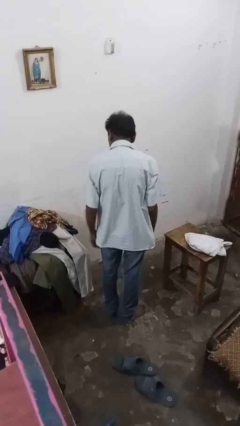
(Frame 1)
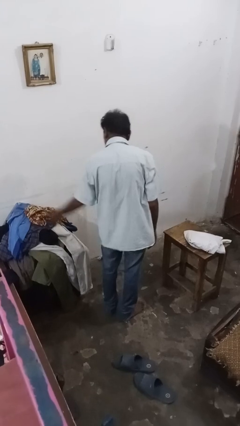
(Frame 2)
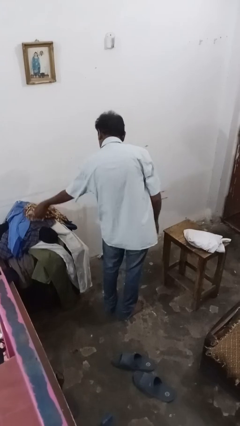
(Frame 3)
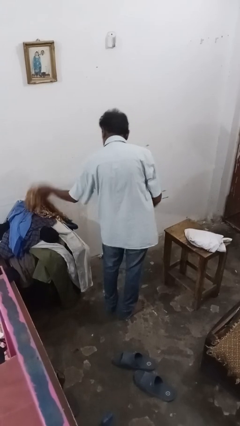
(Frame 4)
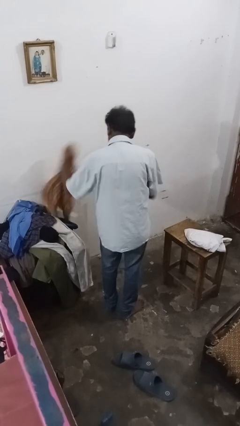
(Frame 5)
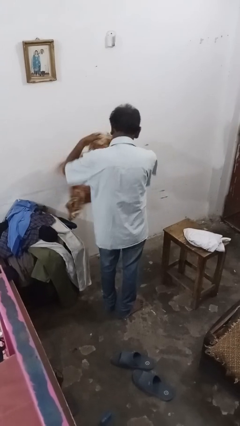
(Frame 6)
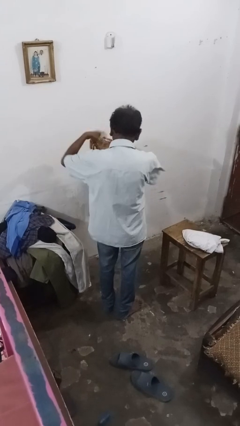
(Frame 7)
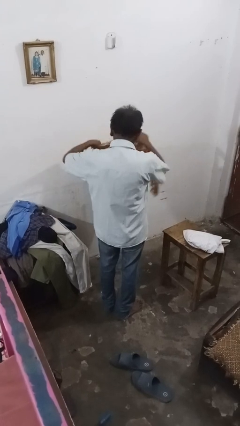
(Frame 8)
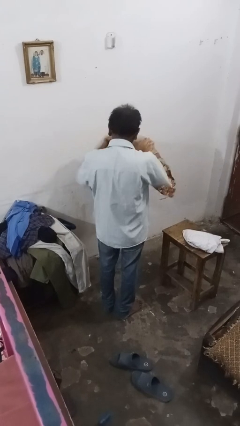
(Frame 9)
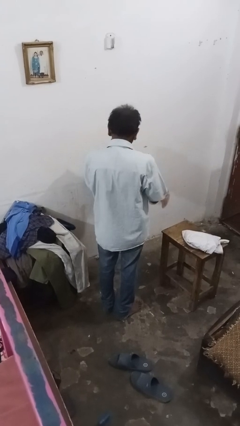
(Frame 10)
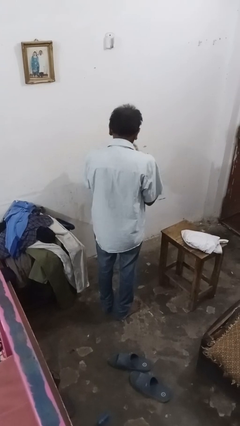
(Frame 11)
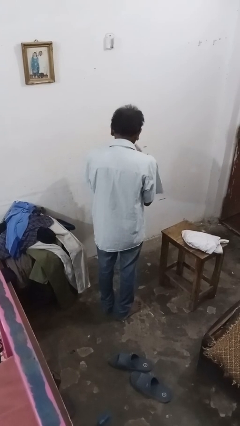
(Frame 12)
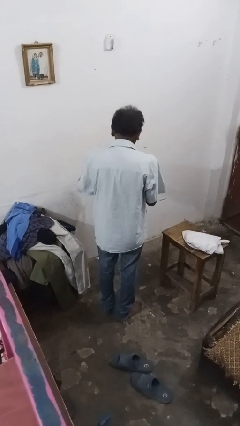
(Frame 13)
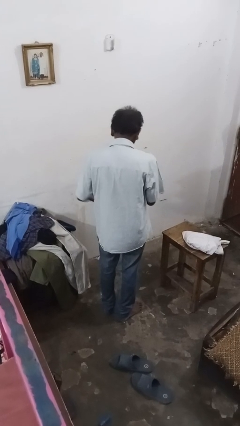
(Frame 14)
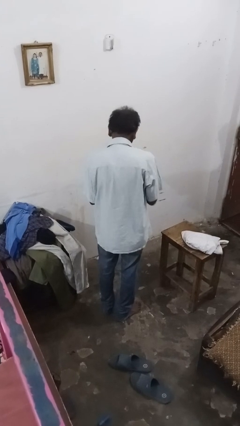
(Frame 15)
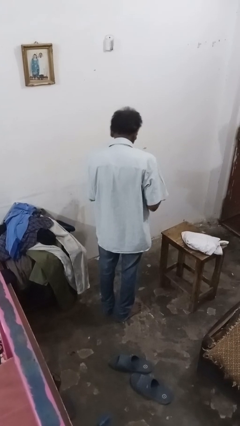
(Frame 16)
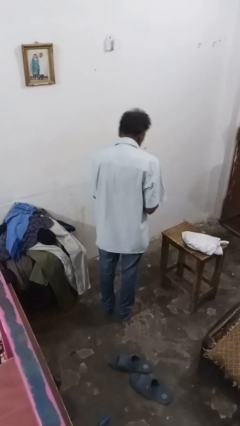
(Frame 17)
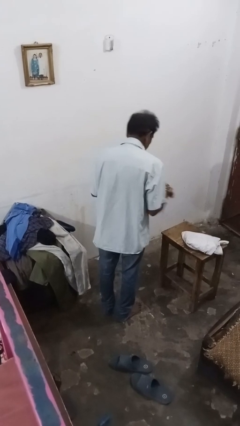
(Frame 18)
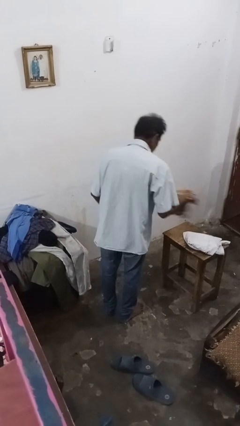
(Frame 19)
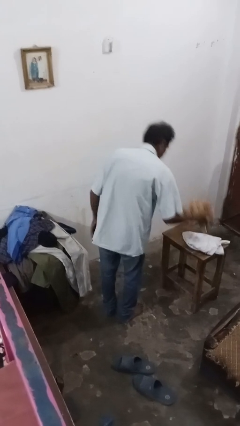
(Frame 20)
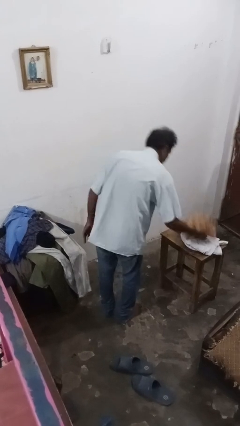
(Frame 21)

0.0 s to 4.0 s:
person folds shirt

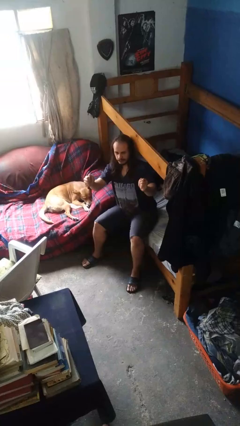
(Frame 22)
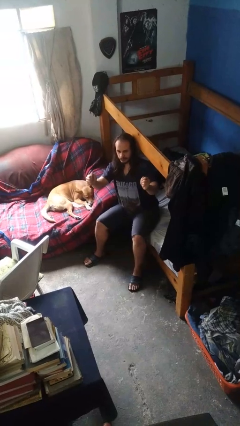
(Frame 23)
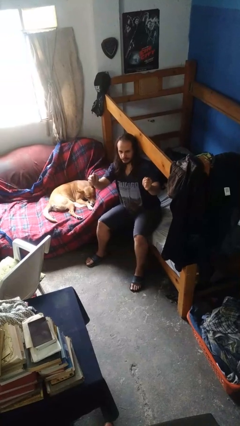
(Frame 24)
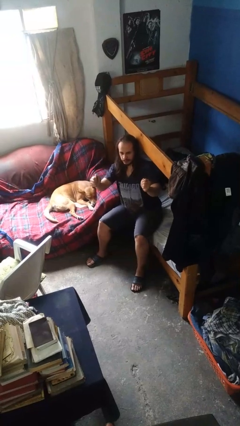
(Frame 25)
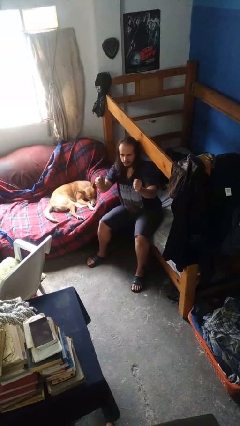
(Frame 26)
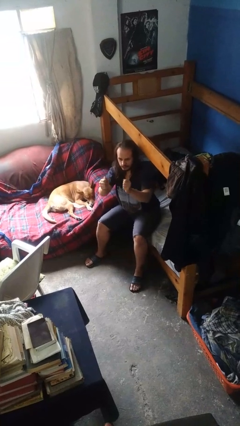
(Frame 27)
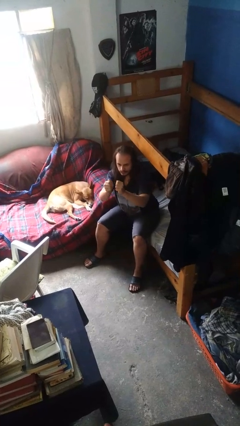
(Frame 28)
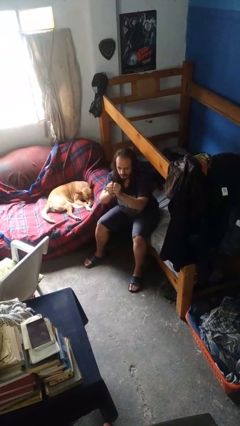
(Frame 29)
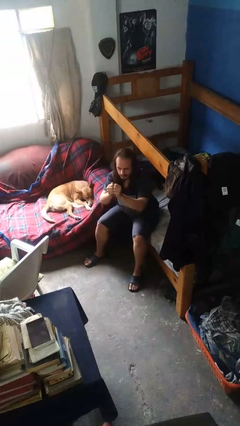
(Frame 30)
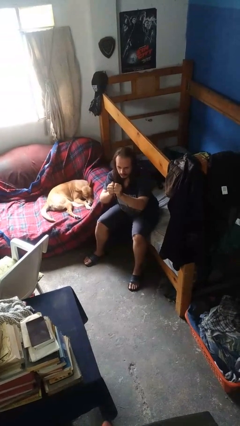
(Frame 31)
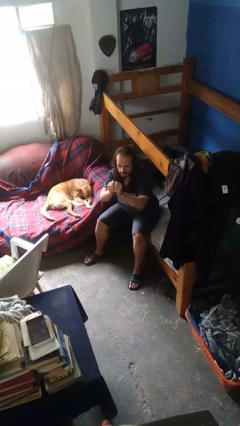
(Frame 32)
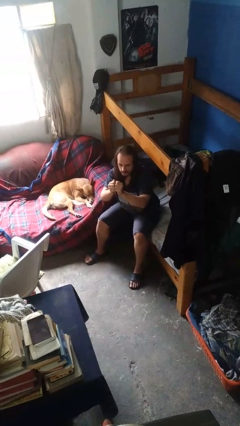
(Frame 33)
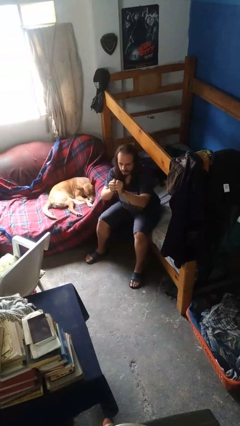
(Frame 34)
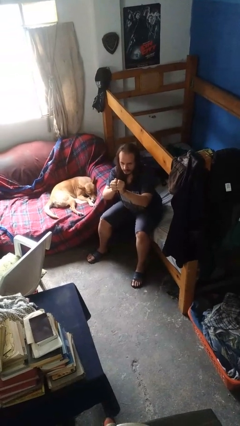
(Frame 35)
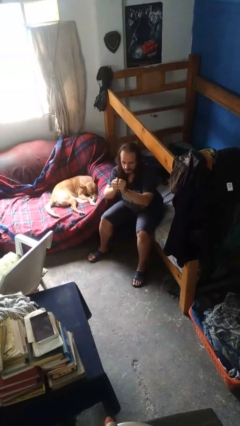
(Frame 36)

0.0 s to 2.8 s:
person gestures zoom out

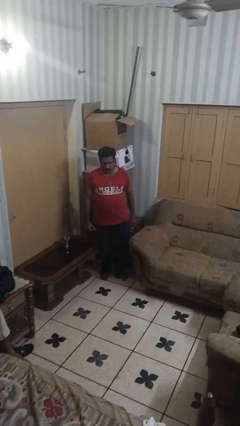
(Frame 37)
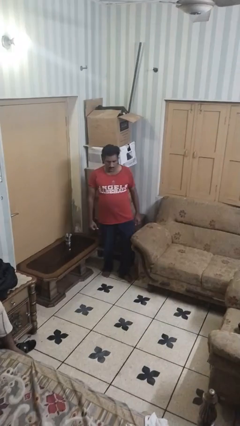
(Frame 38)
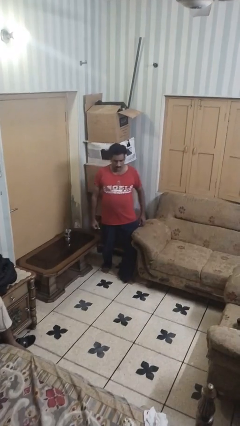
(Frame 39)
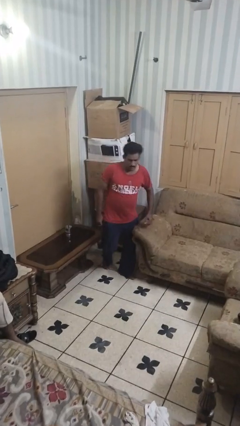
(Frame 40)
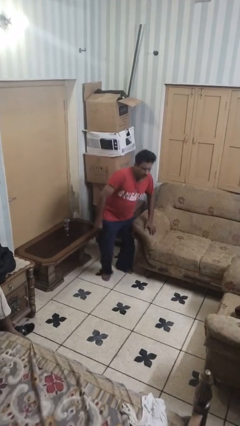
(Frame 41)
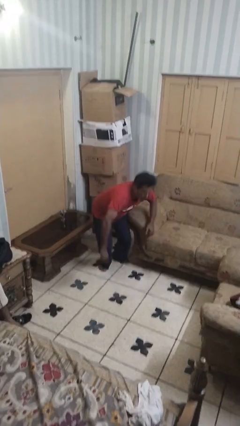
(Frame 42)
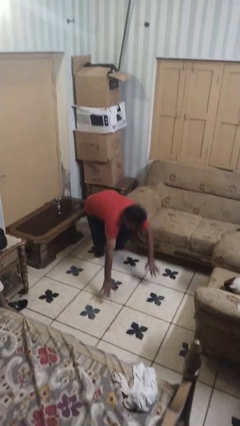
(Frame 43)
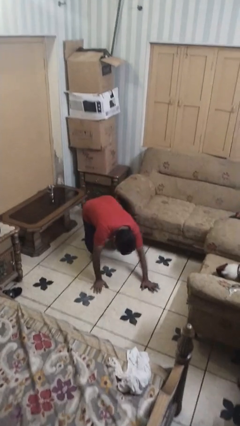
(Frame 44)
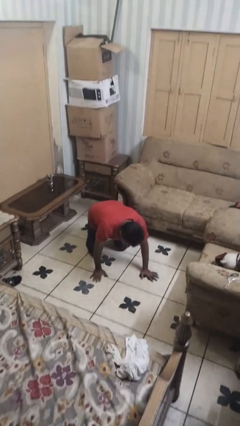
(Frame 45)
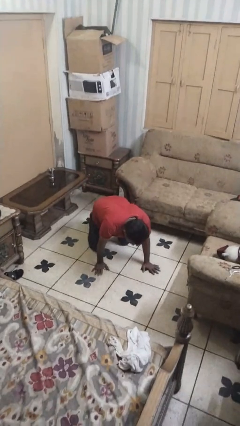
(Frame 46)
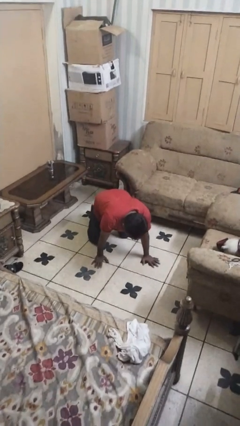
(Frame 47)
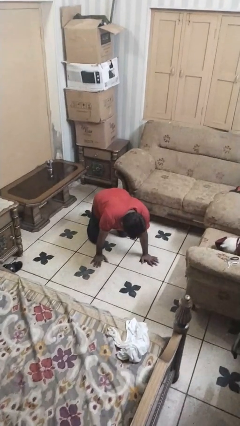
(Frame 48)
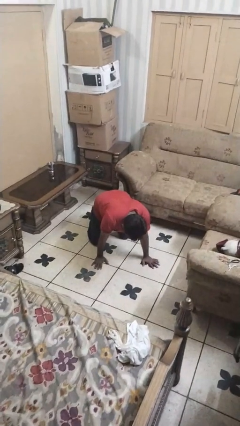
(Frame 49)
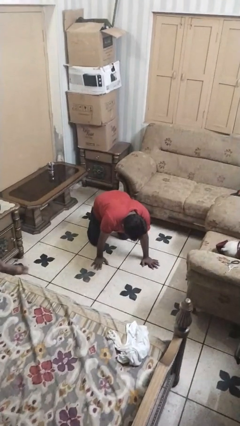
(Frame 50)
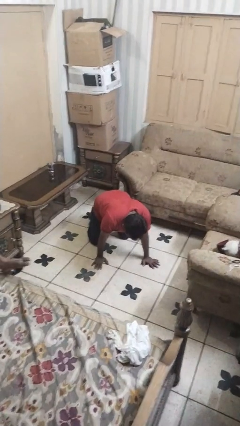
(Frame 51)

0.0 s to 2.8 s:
person trips on object on floor

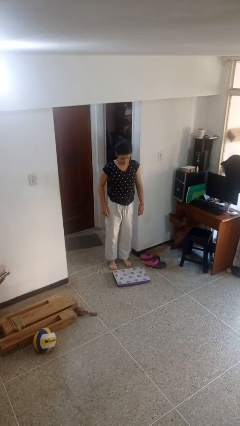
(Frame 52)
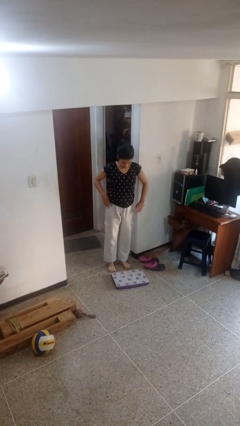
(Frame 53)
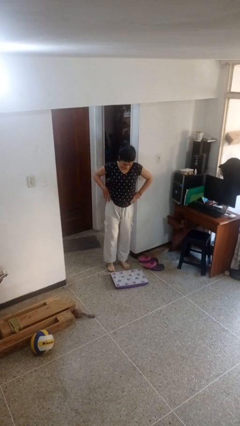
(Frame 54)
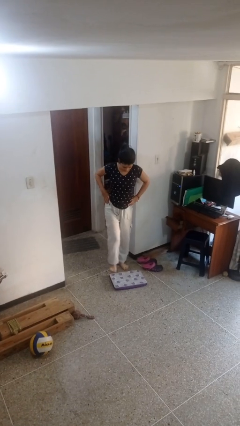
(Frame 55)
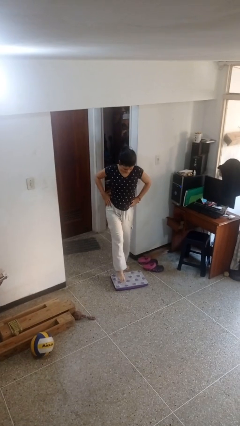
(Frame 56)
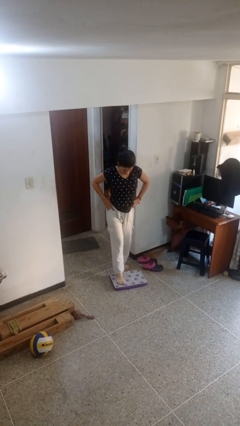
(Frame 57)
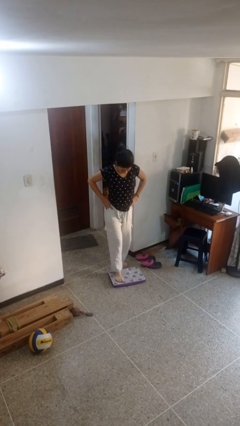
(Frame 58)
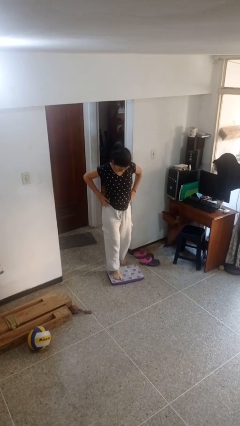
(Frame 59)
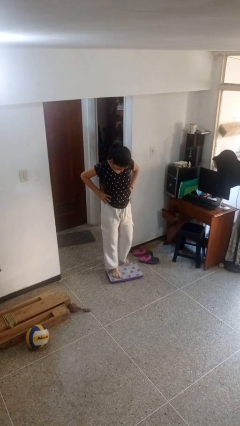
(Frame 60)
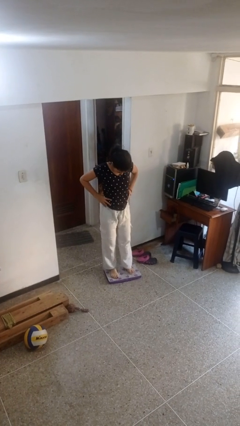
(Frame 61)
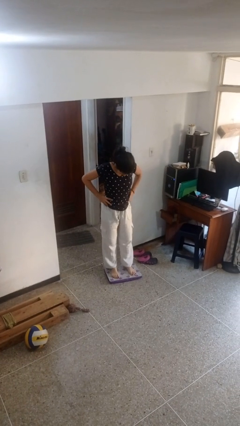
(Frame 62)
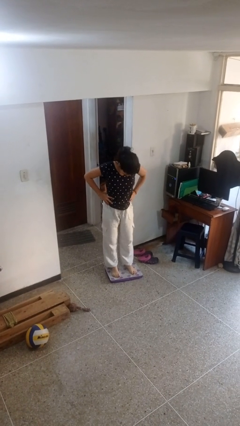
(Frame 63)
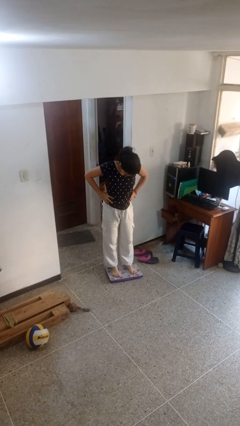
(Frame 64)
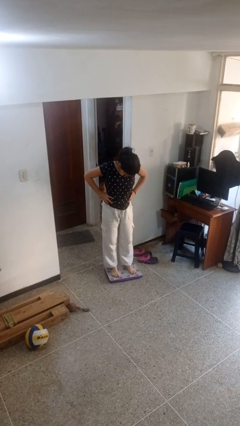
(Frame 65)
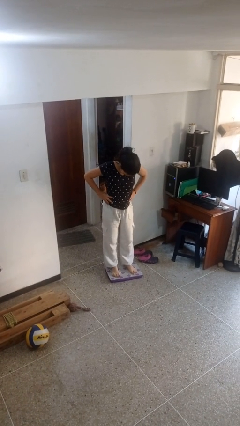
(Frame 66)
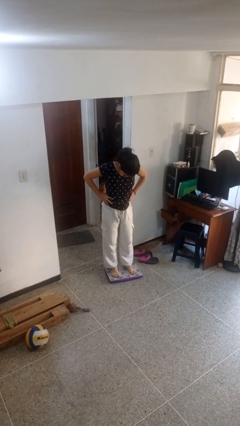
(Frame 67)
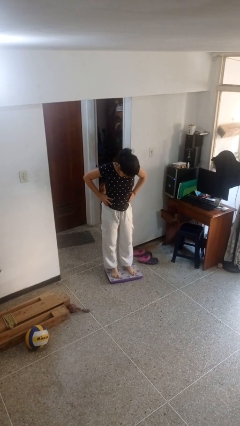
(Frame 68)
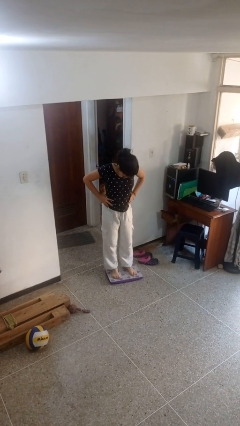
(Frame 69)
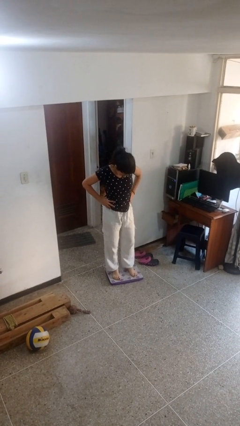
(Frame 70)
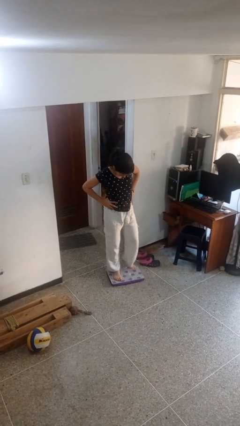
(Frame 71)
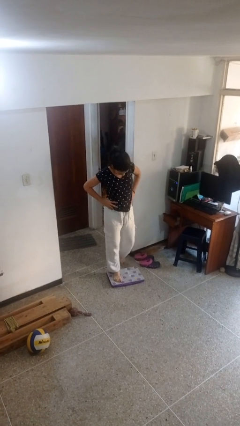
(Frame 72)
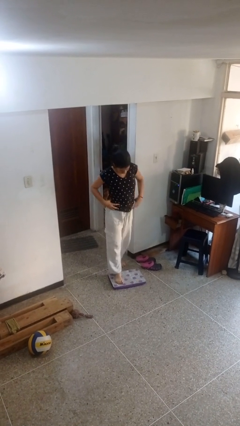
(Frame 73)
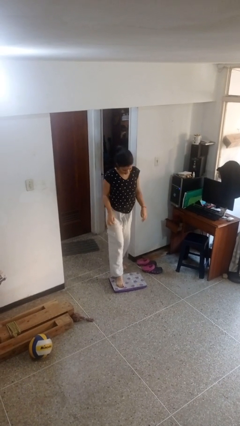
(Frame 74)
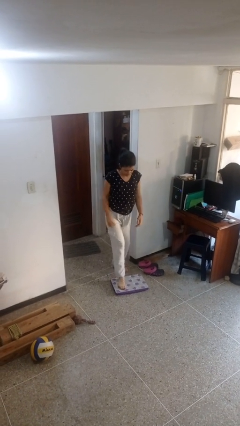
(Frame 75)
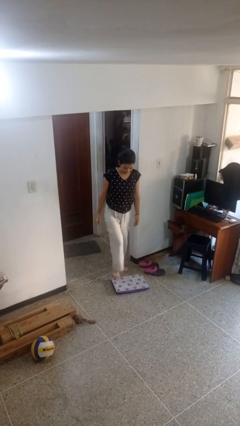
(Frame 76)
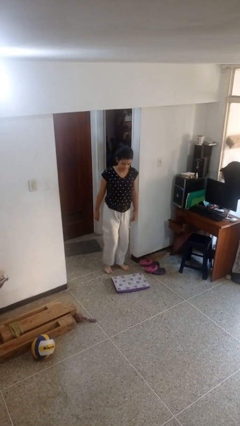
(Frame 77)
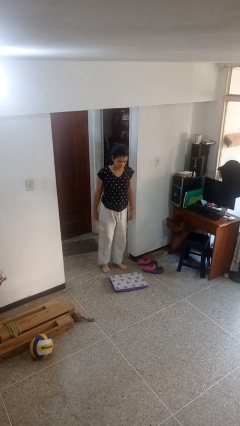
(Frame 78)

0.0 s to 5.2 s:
person uses bodyweight scale

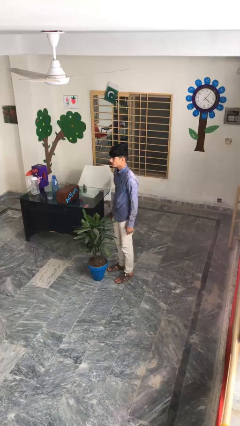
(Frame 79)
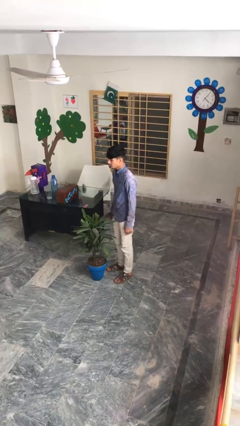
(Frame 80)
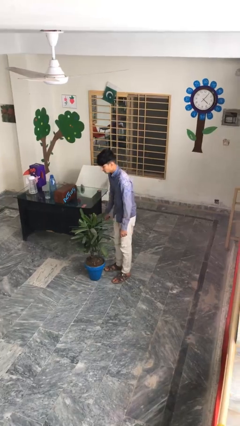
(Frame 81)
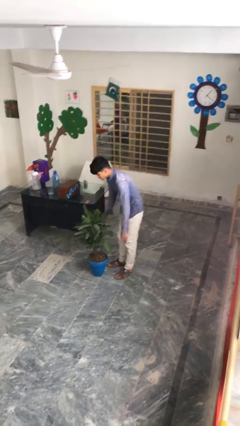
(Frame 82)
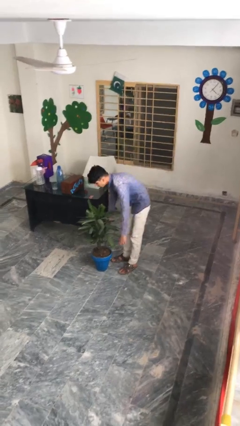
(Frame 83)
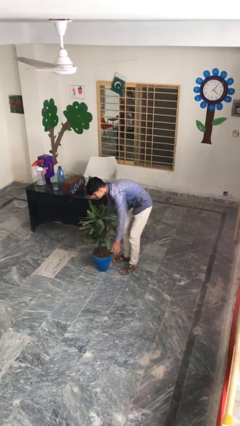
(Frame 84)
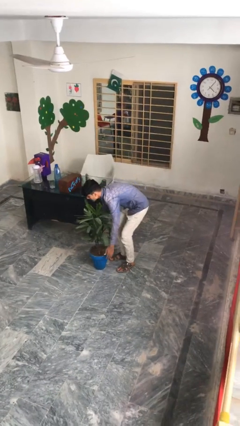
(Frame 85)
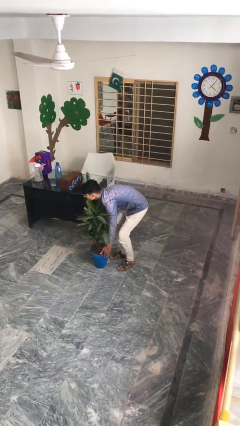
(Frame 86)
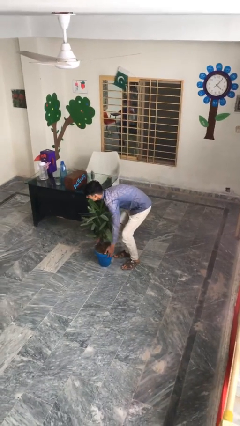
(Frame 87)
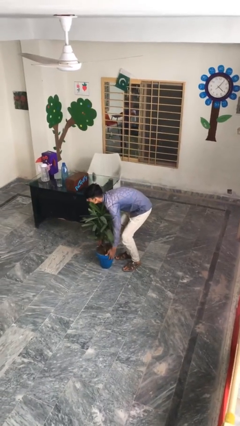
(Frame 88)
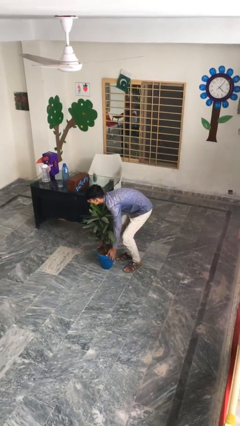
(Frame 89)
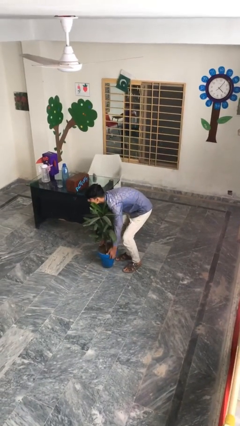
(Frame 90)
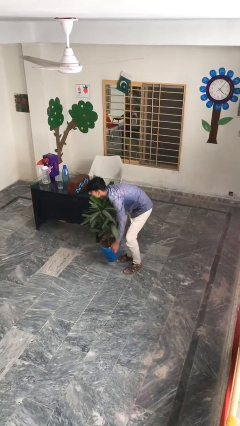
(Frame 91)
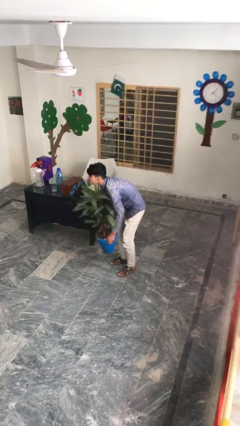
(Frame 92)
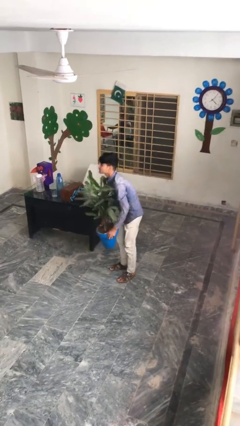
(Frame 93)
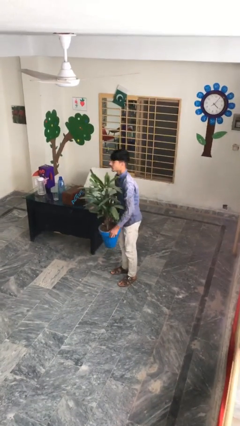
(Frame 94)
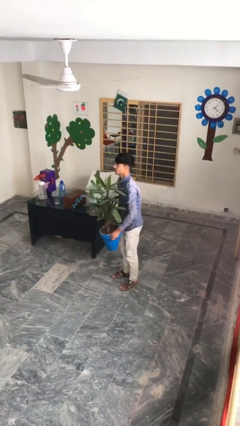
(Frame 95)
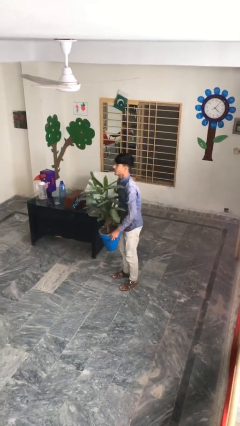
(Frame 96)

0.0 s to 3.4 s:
person picks up object from floor
